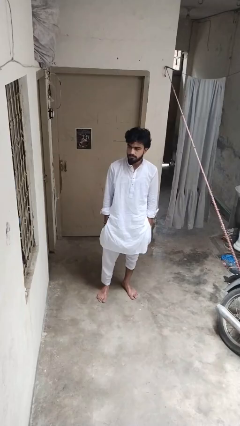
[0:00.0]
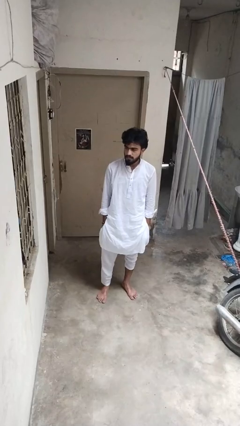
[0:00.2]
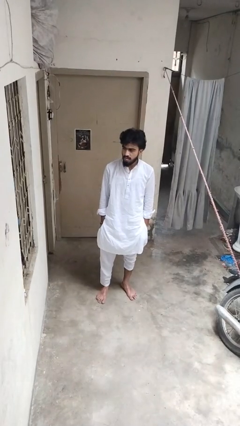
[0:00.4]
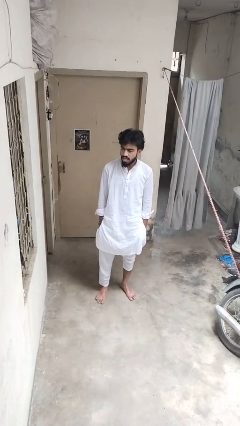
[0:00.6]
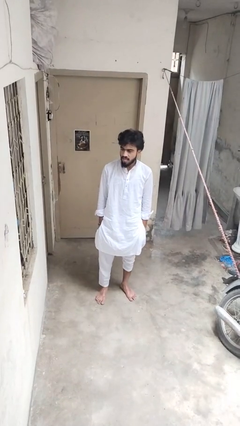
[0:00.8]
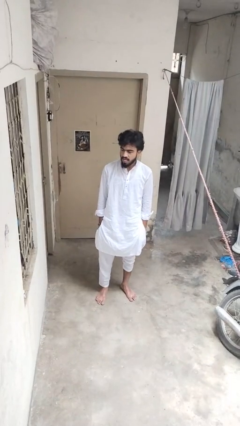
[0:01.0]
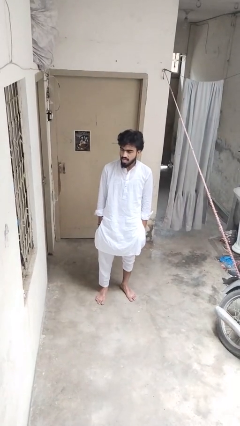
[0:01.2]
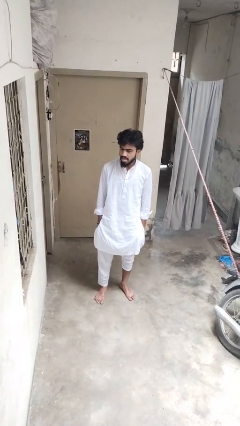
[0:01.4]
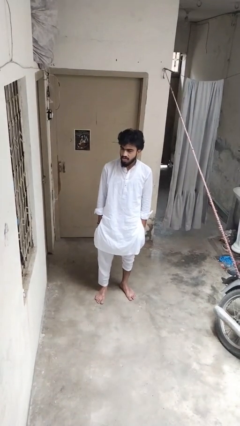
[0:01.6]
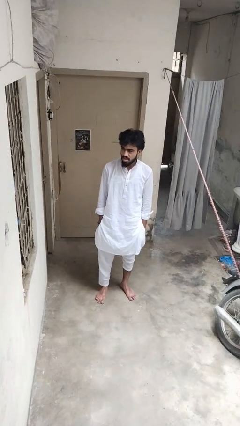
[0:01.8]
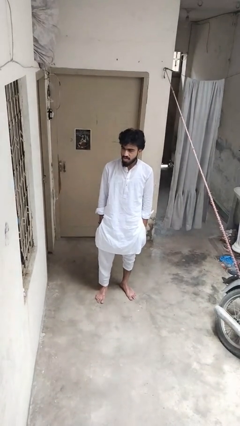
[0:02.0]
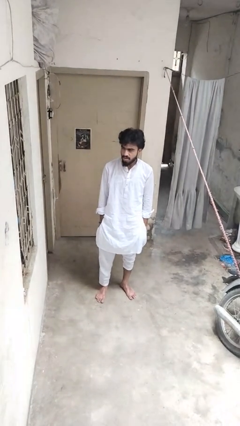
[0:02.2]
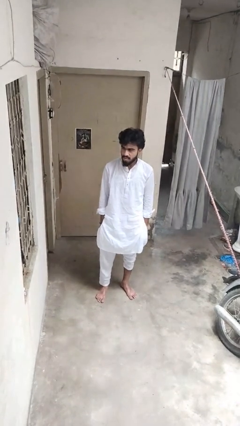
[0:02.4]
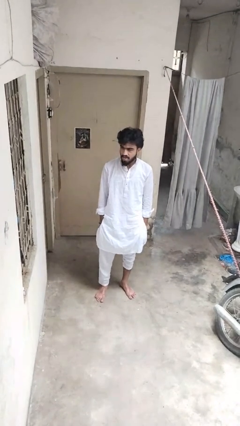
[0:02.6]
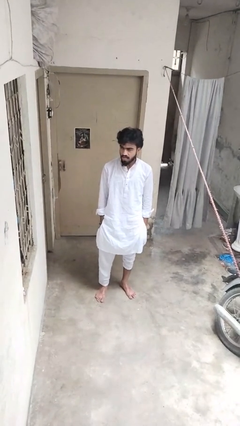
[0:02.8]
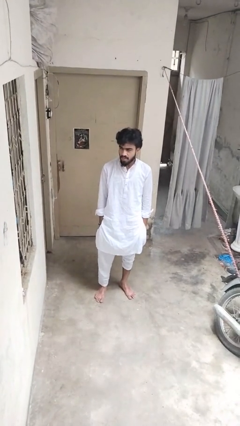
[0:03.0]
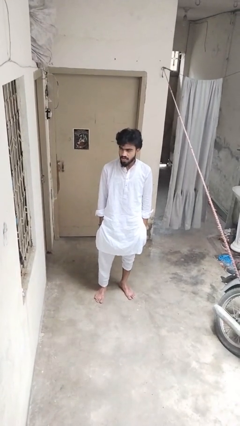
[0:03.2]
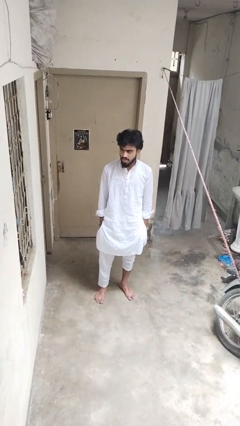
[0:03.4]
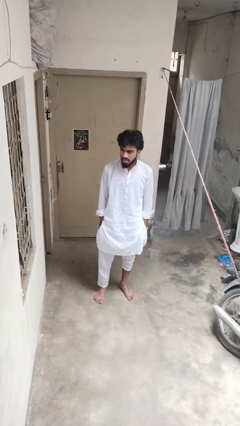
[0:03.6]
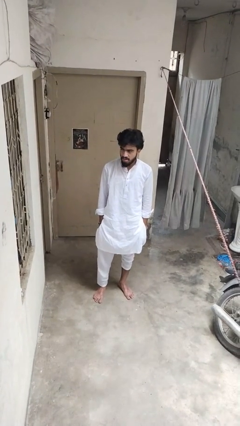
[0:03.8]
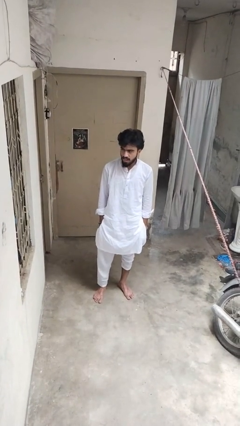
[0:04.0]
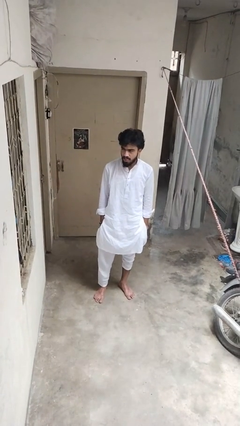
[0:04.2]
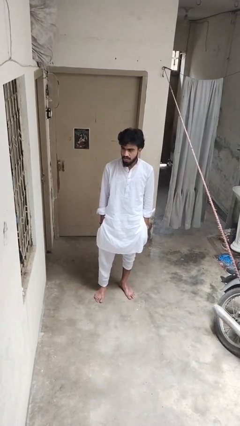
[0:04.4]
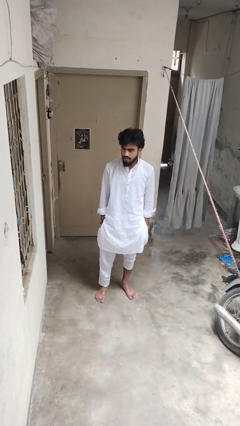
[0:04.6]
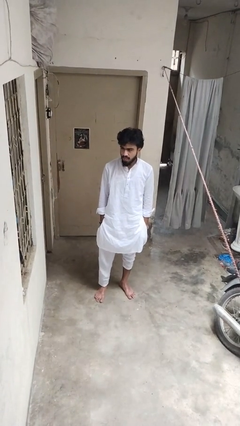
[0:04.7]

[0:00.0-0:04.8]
person sticks out tongue

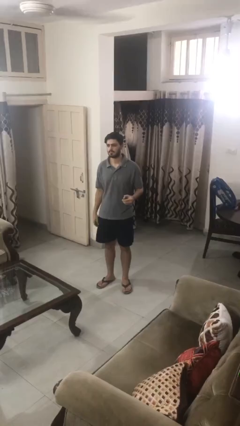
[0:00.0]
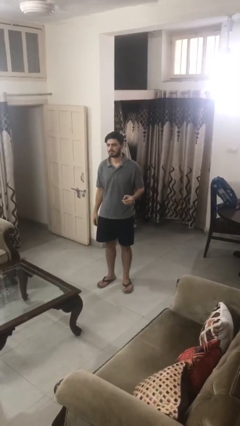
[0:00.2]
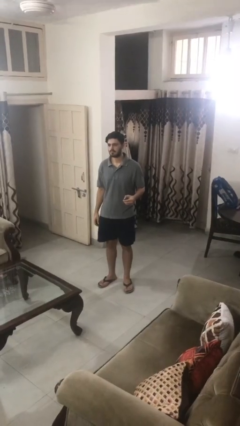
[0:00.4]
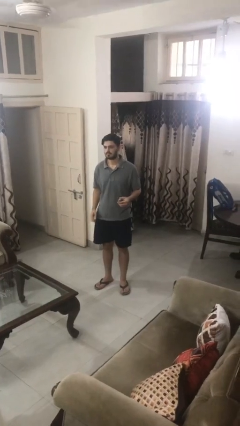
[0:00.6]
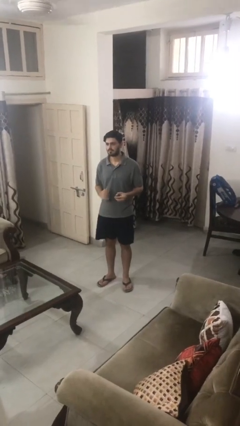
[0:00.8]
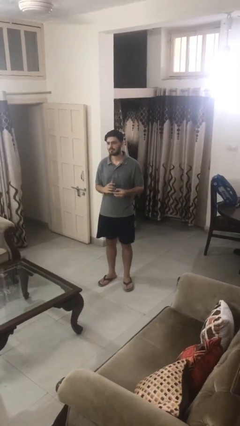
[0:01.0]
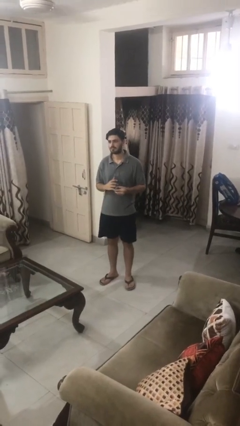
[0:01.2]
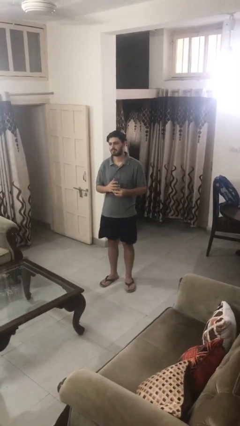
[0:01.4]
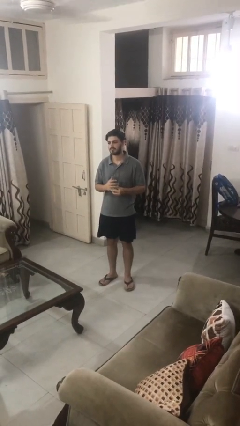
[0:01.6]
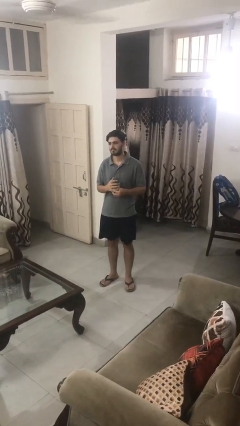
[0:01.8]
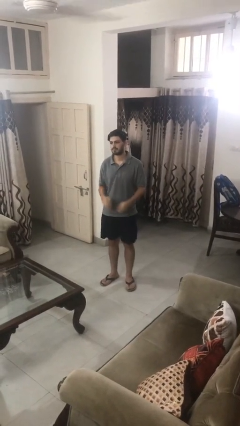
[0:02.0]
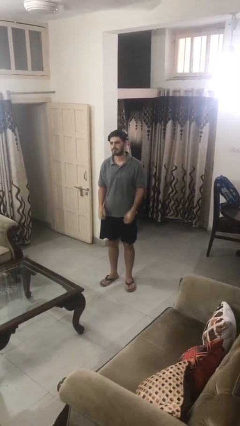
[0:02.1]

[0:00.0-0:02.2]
person puts on ring

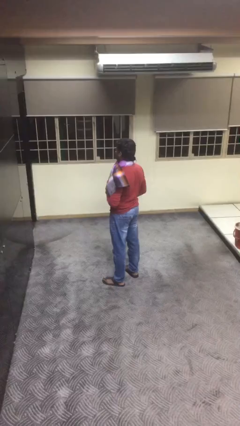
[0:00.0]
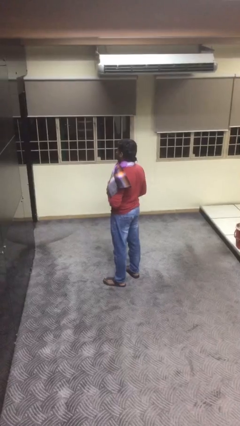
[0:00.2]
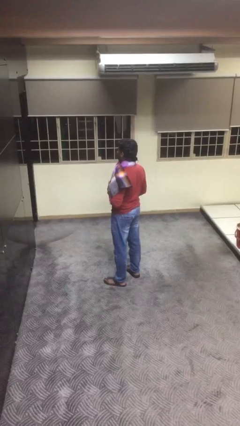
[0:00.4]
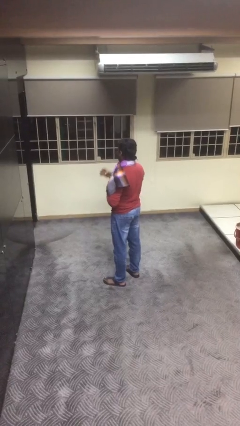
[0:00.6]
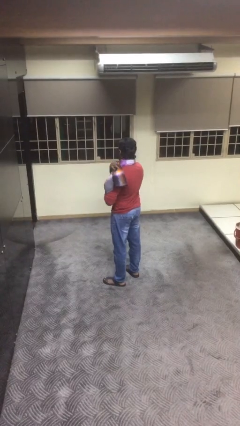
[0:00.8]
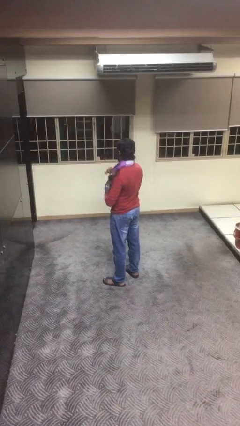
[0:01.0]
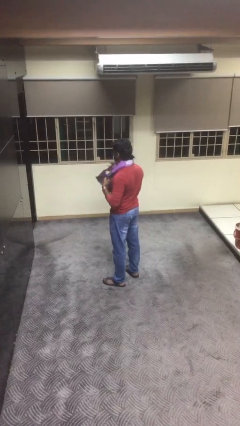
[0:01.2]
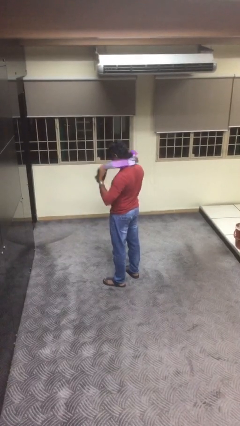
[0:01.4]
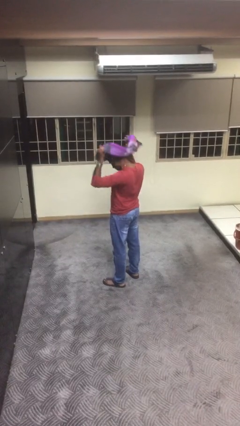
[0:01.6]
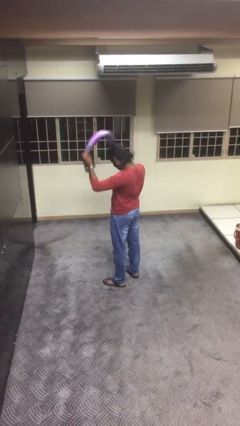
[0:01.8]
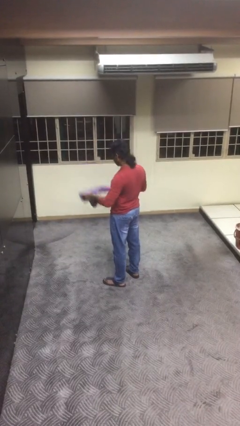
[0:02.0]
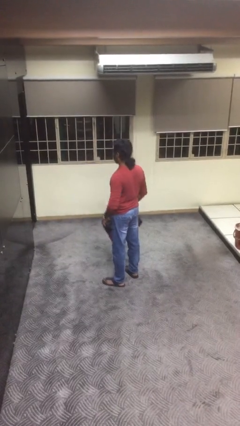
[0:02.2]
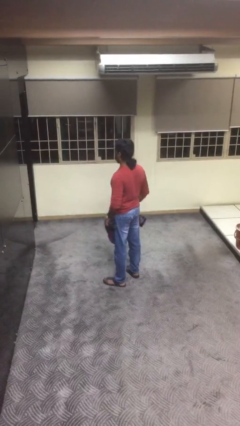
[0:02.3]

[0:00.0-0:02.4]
person takes off scarf

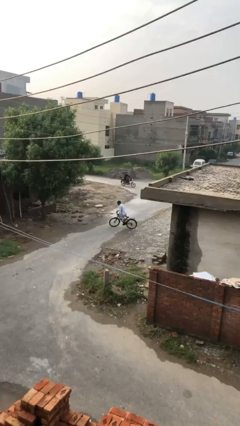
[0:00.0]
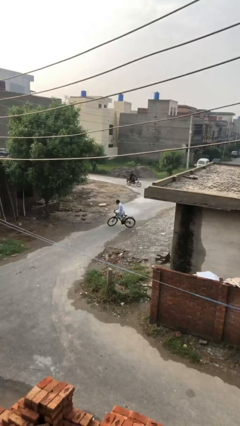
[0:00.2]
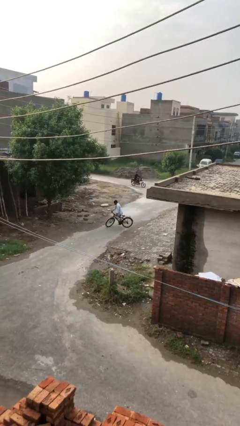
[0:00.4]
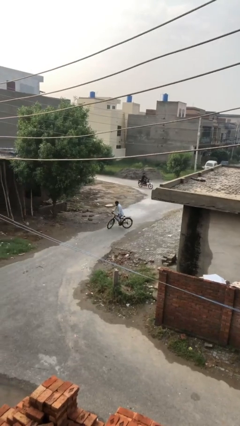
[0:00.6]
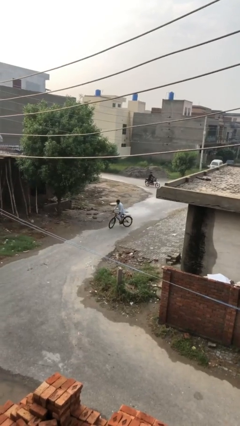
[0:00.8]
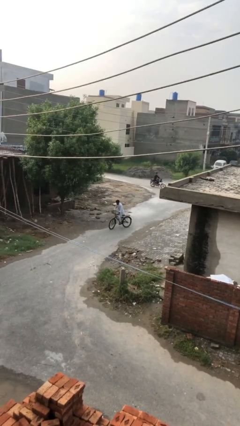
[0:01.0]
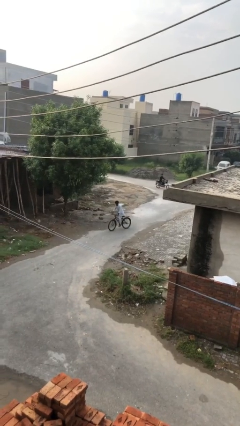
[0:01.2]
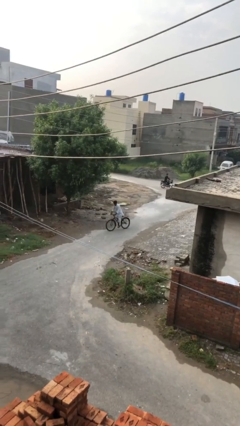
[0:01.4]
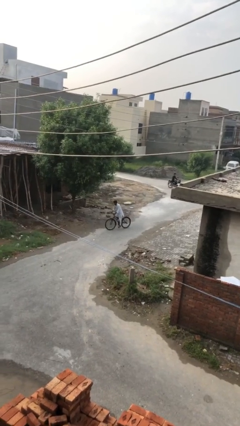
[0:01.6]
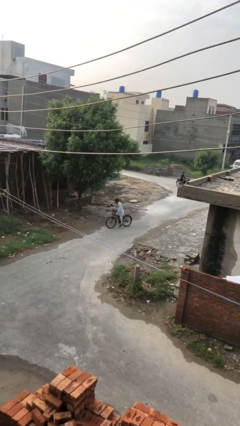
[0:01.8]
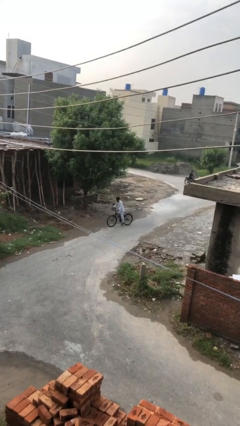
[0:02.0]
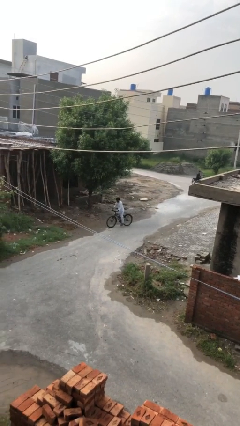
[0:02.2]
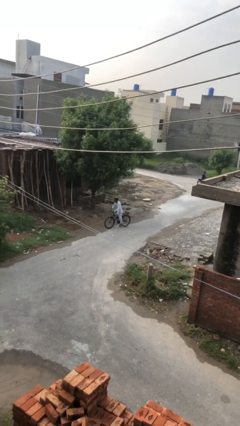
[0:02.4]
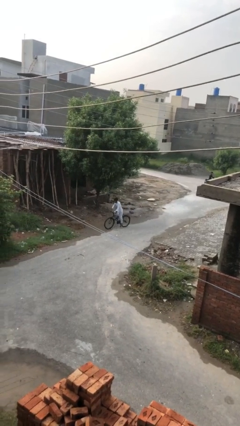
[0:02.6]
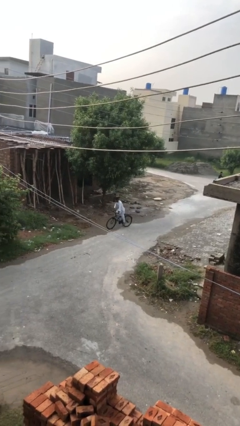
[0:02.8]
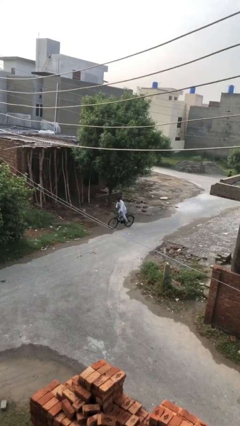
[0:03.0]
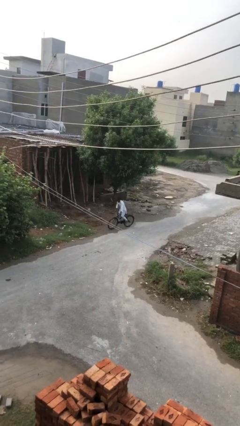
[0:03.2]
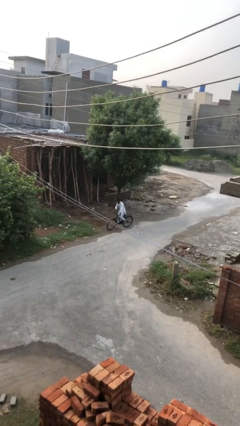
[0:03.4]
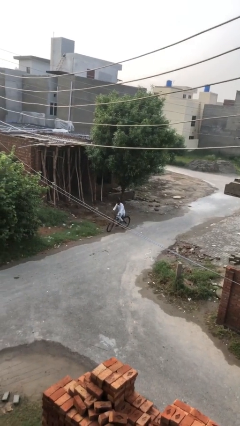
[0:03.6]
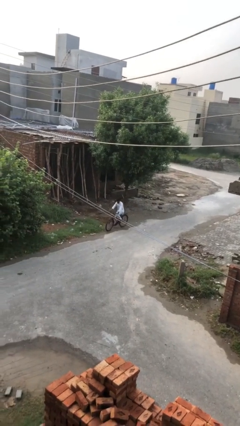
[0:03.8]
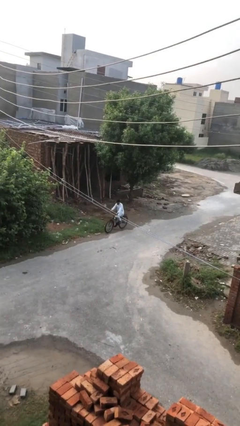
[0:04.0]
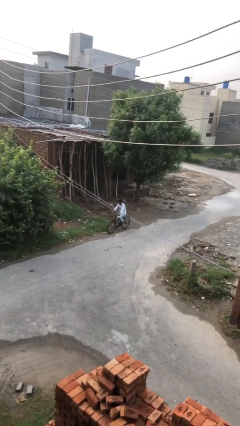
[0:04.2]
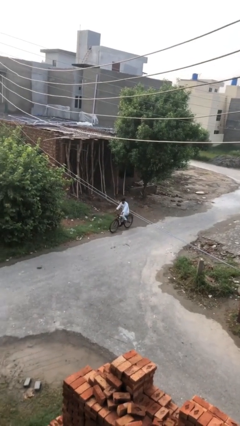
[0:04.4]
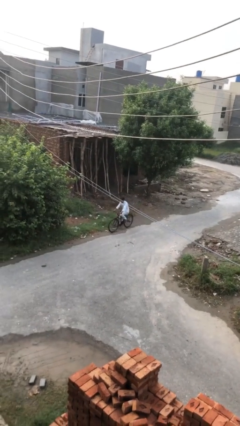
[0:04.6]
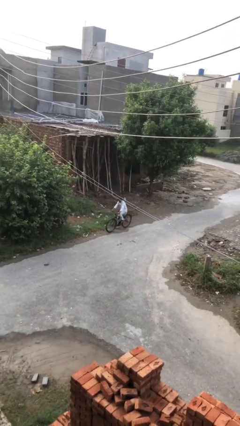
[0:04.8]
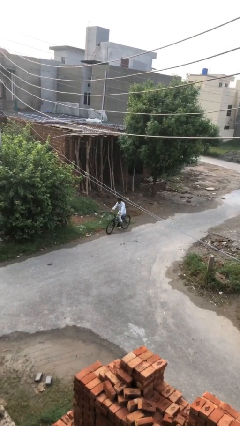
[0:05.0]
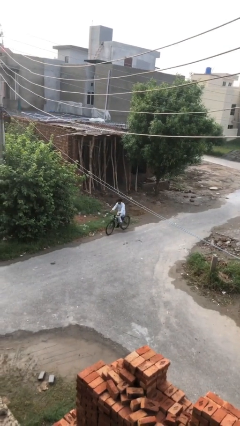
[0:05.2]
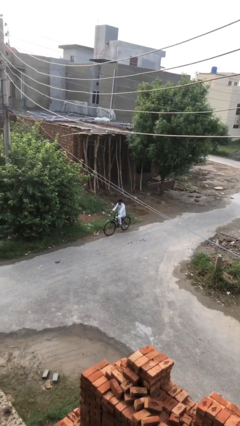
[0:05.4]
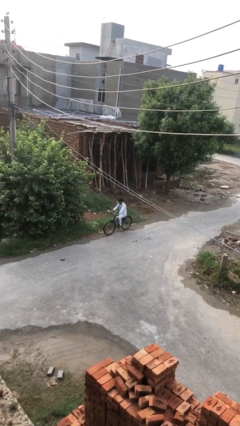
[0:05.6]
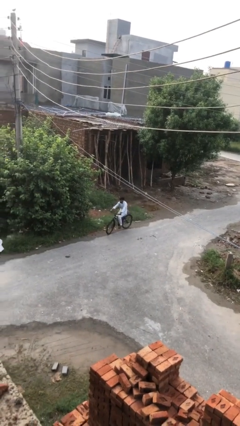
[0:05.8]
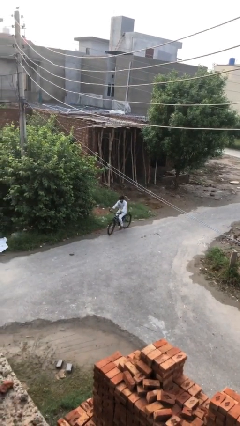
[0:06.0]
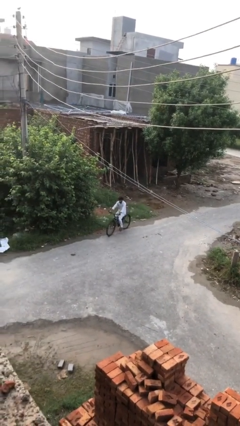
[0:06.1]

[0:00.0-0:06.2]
person rides bicycle

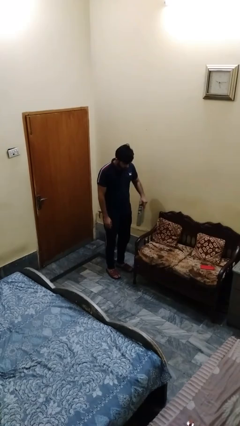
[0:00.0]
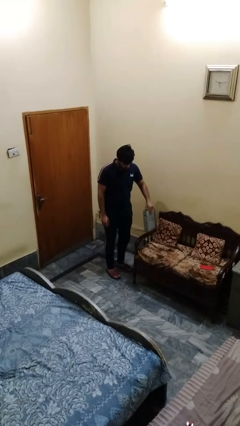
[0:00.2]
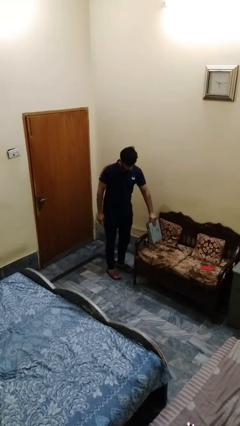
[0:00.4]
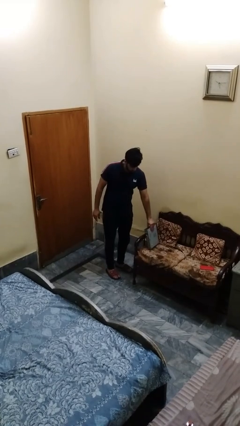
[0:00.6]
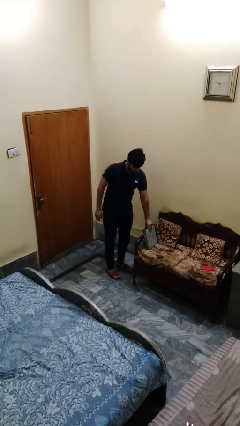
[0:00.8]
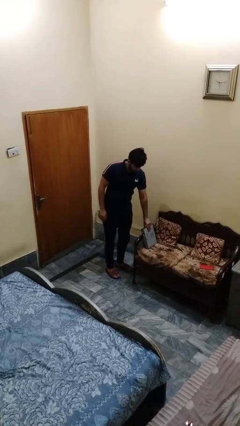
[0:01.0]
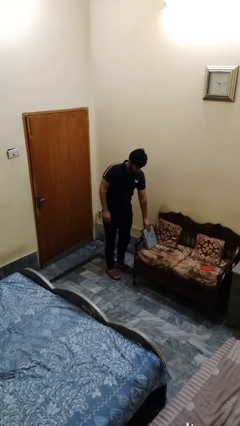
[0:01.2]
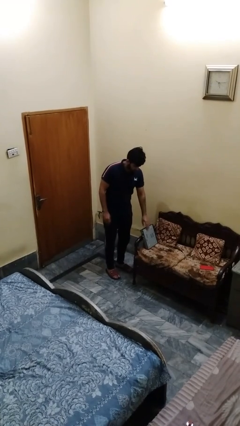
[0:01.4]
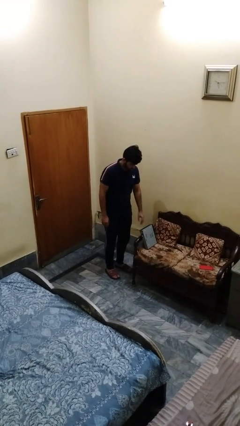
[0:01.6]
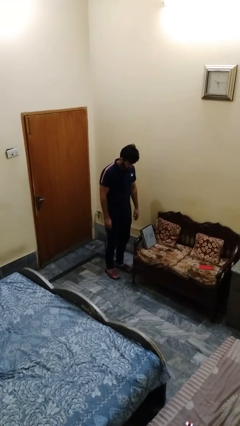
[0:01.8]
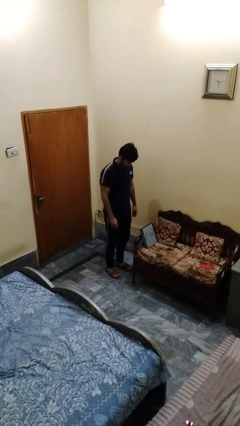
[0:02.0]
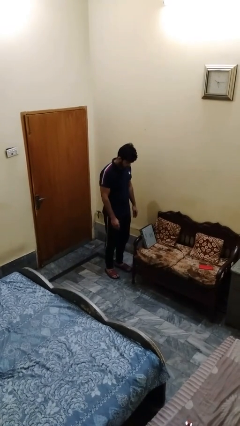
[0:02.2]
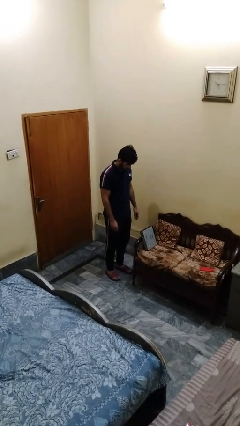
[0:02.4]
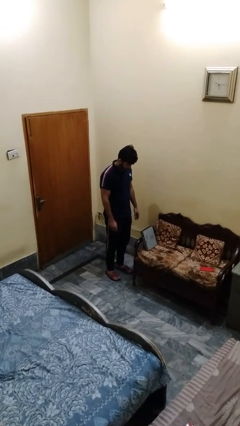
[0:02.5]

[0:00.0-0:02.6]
person puts down object on couch
